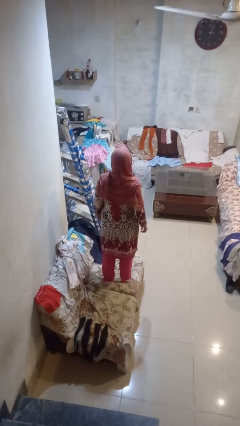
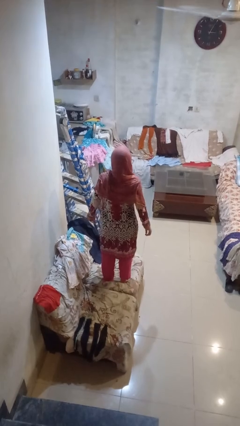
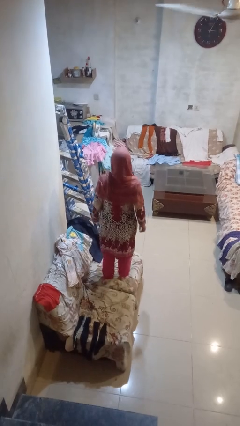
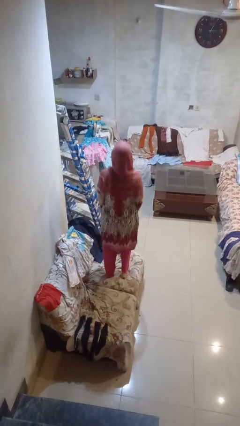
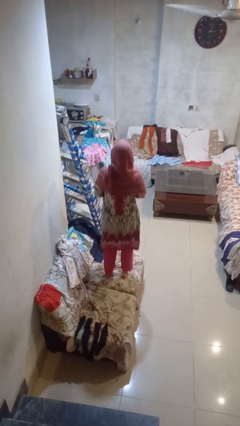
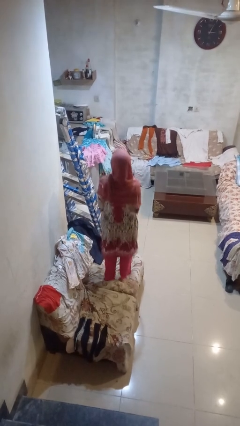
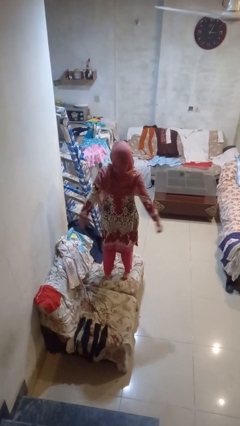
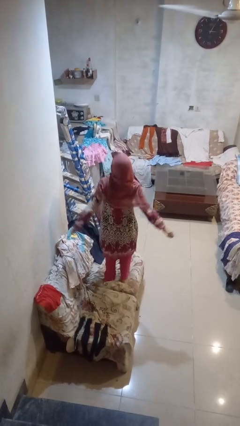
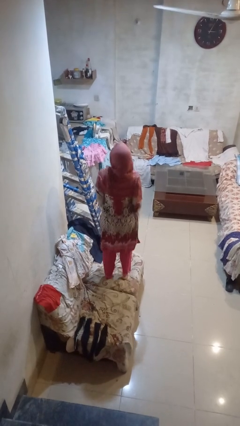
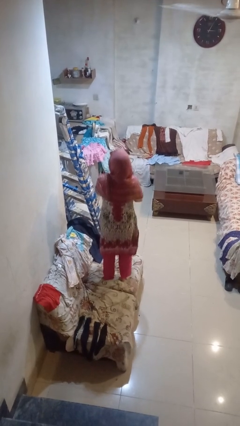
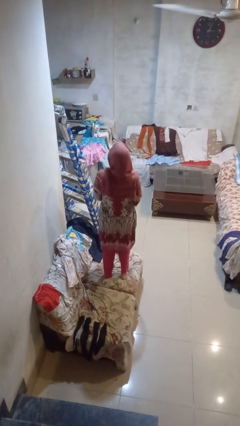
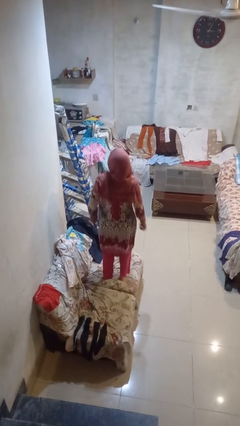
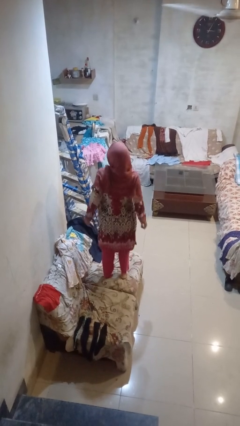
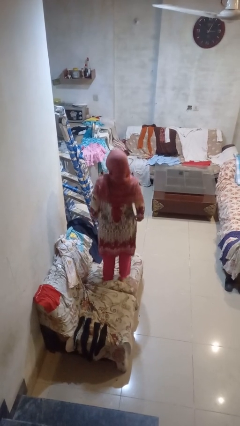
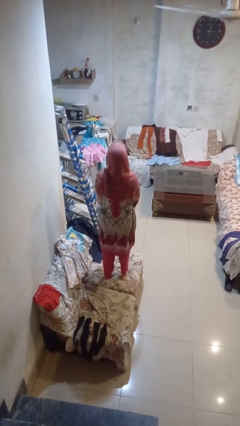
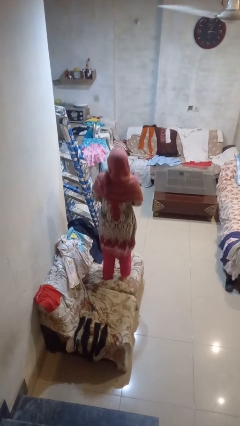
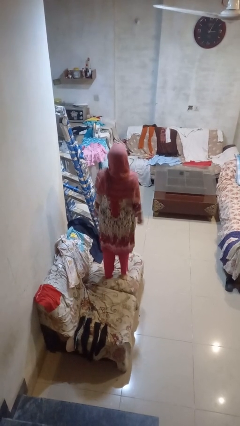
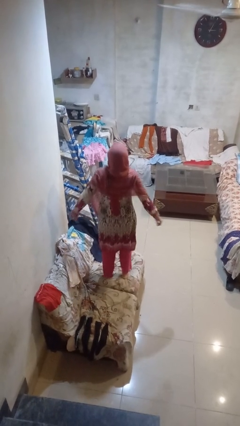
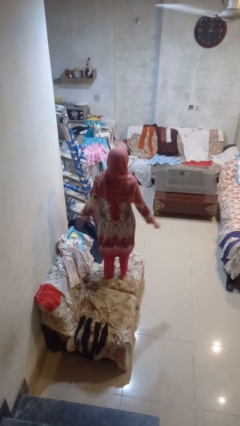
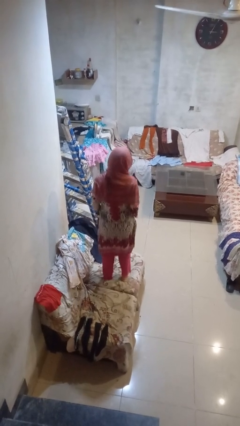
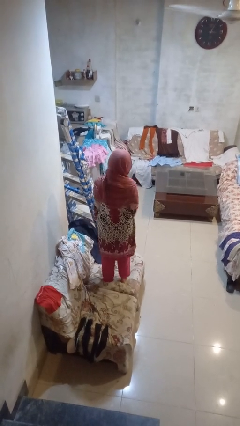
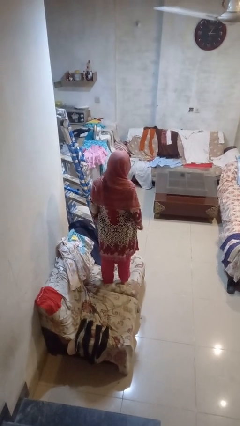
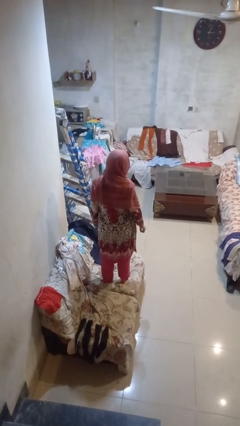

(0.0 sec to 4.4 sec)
person jumps on couch

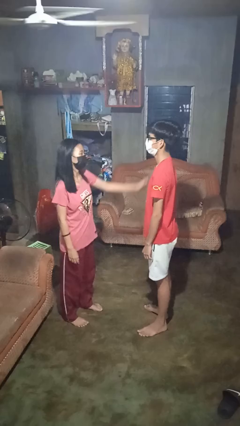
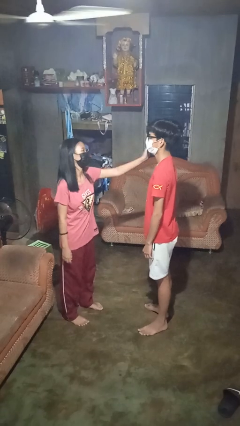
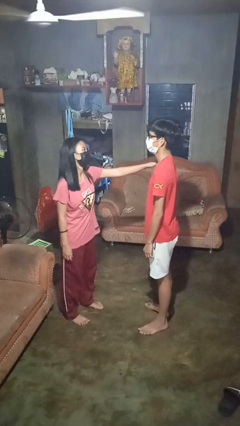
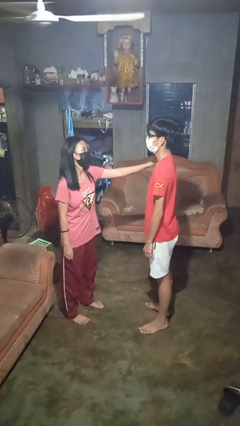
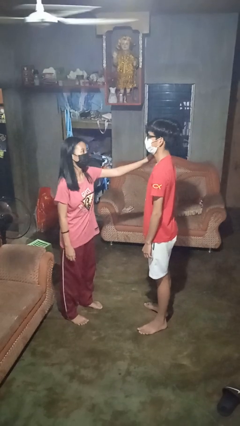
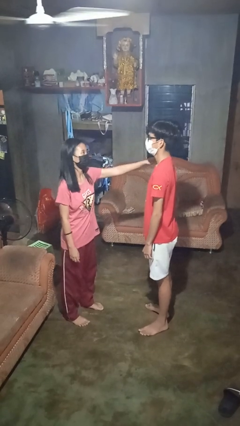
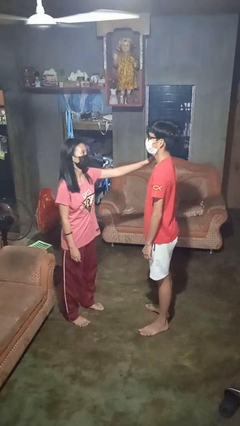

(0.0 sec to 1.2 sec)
person pounds shoulders of person

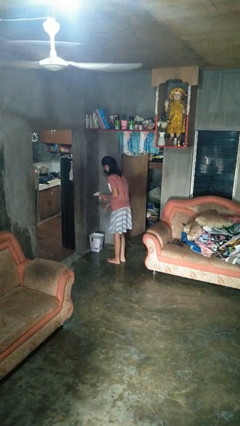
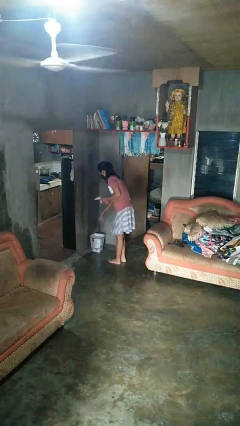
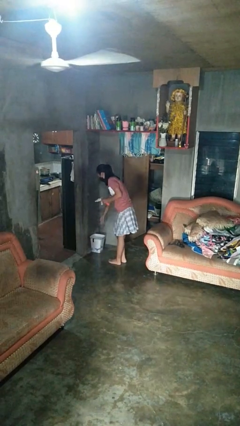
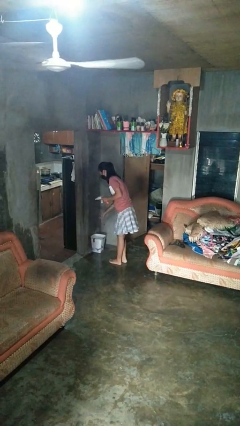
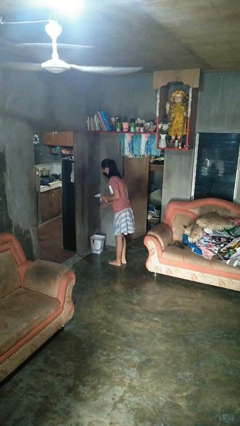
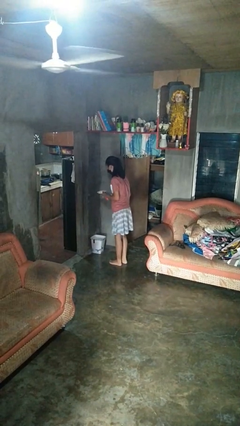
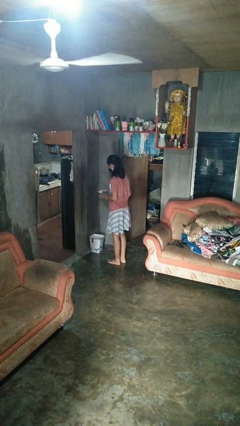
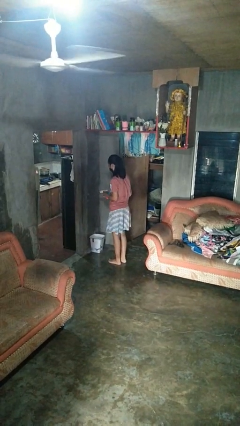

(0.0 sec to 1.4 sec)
person discards trash

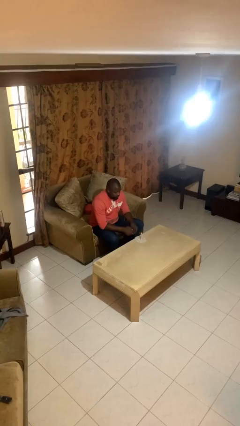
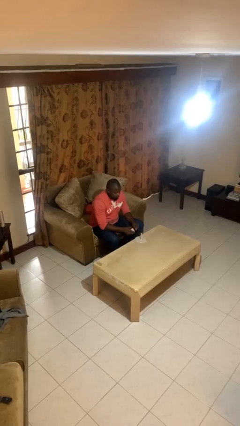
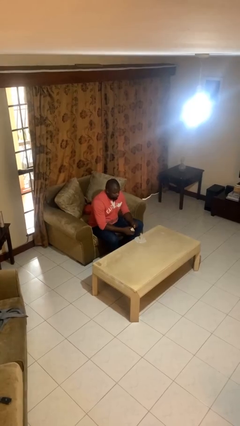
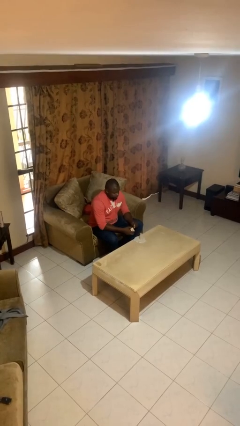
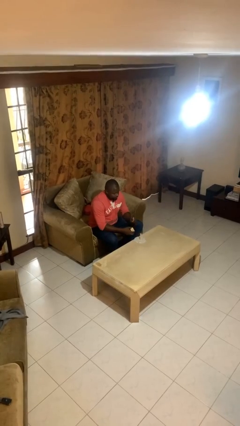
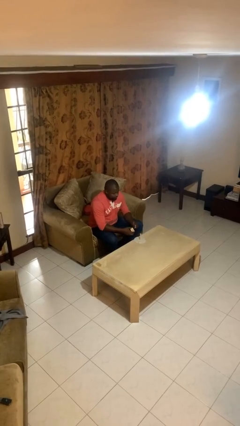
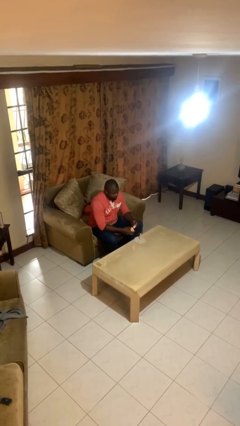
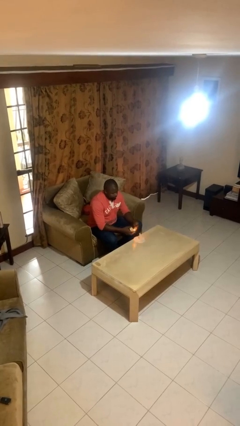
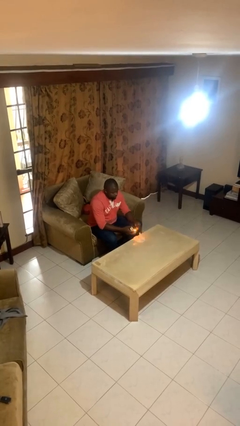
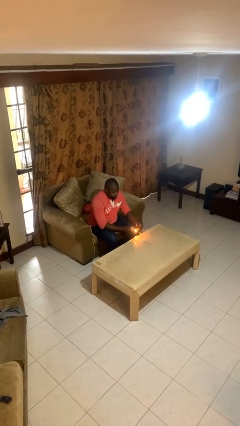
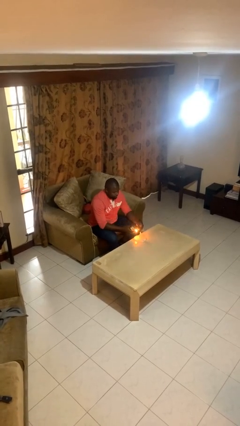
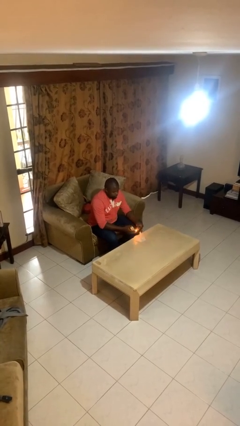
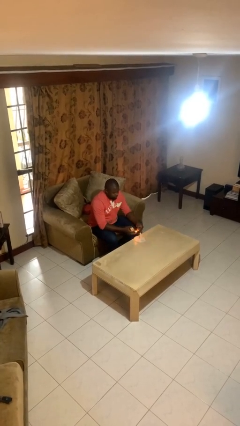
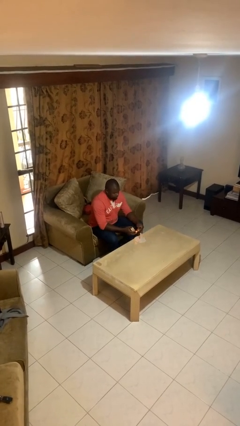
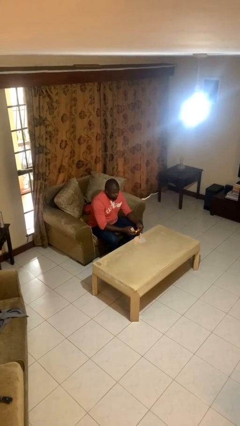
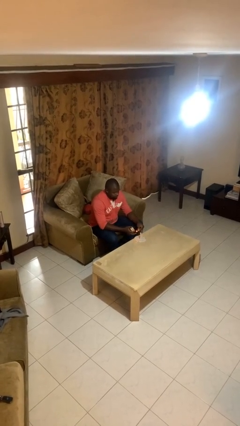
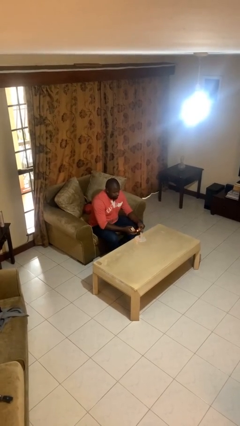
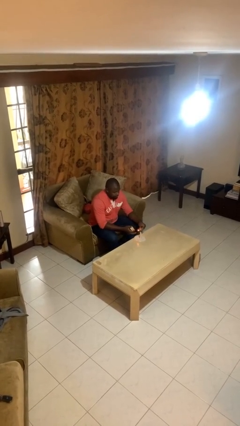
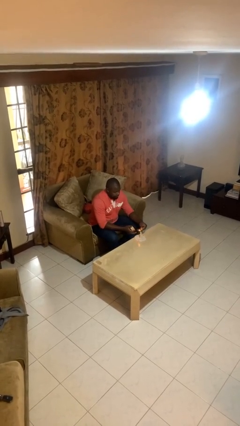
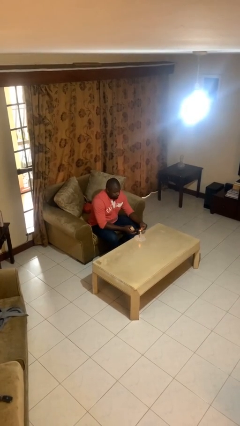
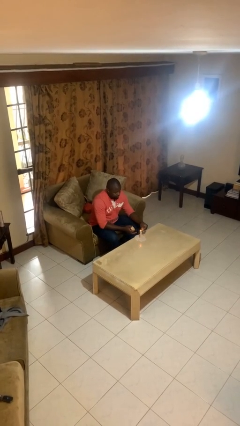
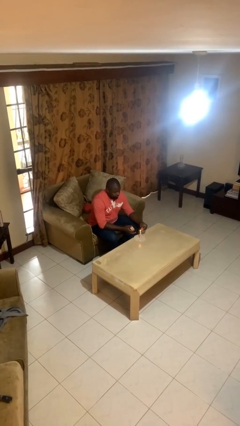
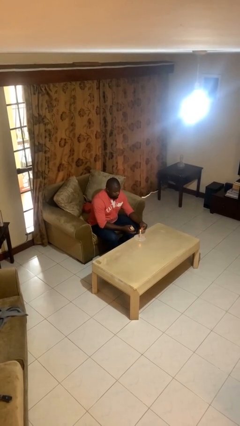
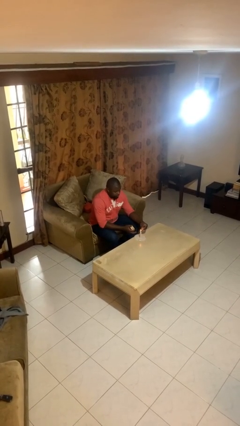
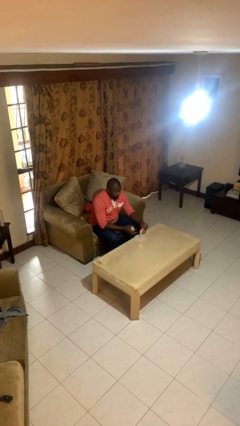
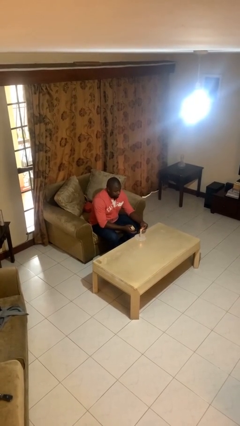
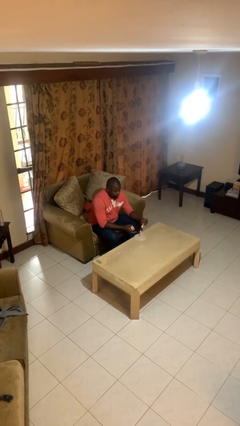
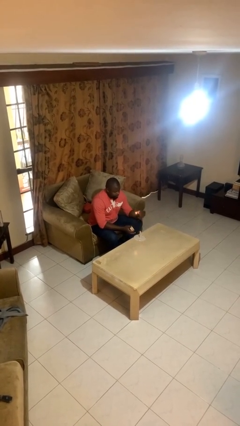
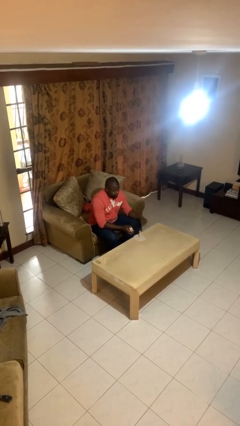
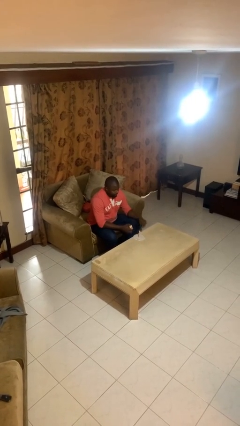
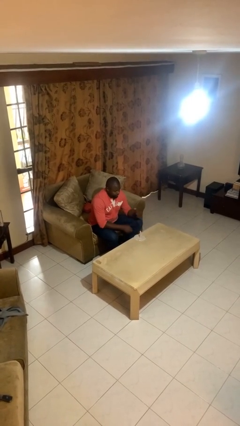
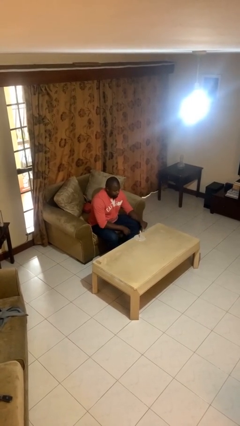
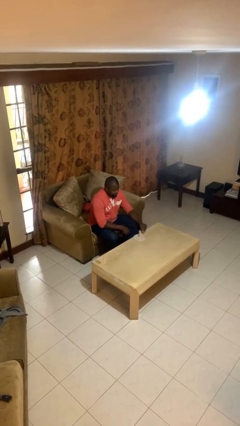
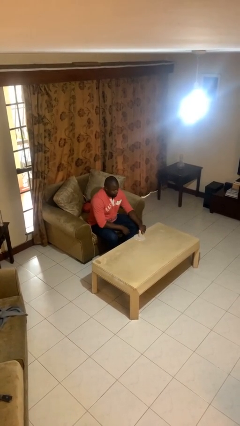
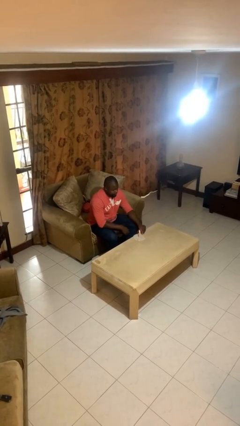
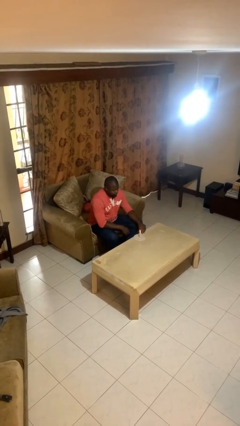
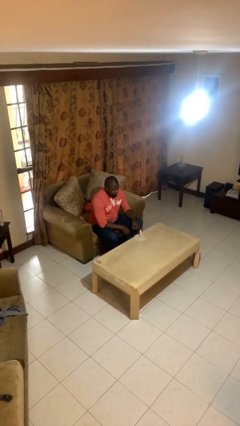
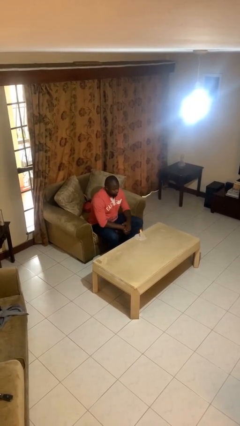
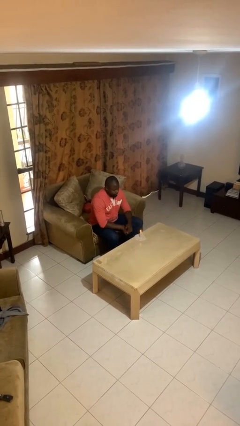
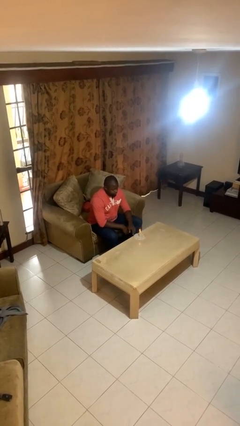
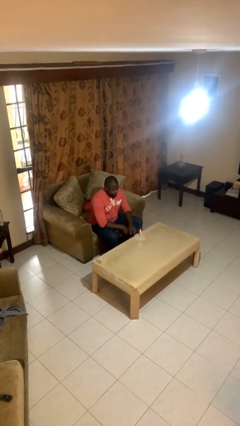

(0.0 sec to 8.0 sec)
person lights candle

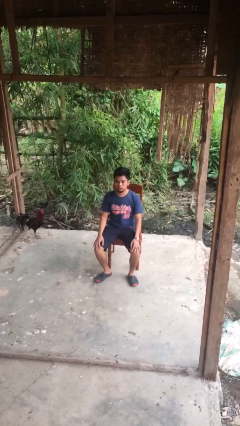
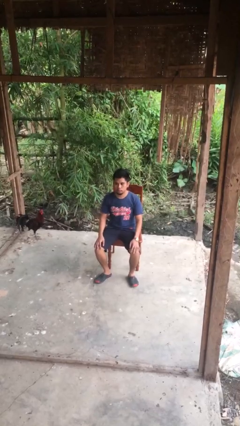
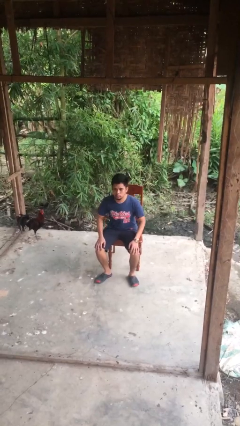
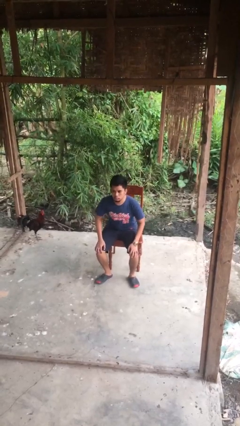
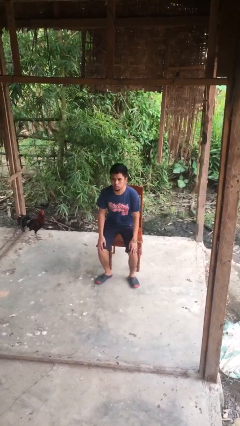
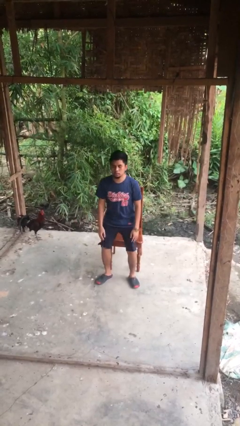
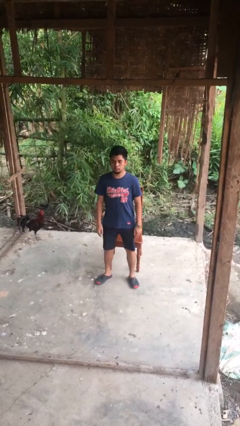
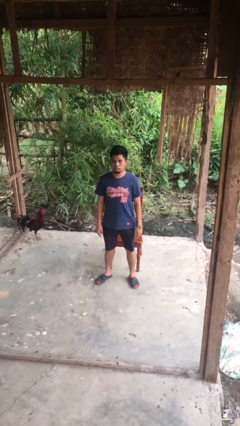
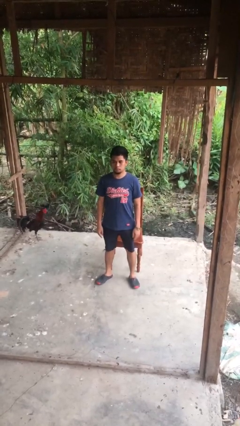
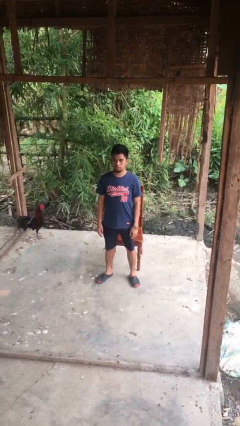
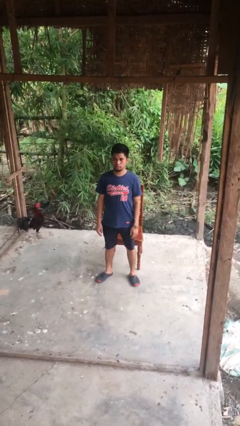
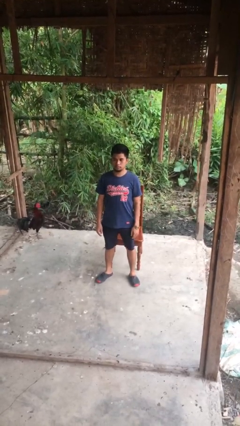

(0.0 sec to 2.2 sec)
person stands up

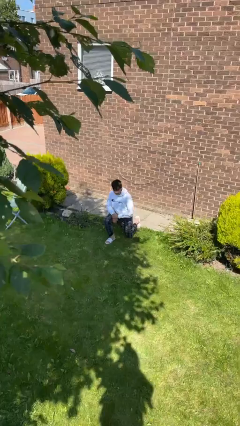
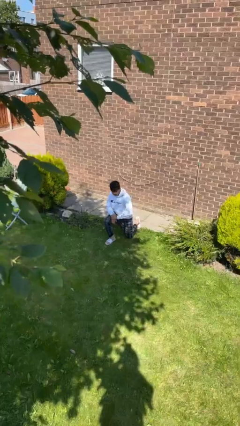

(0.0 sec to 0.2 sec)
person stands up from floor
